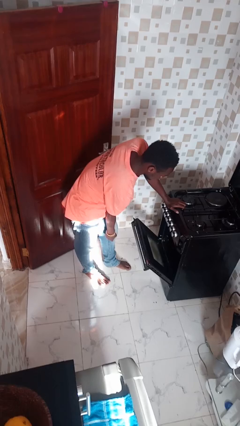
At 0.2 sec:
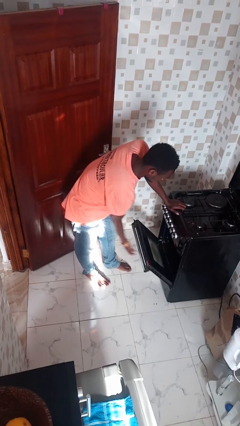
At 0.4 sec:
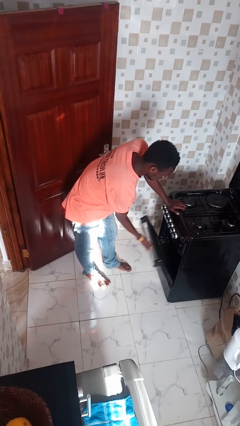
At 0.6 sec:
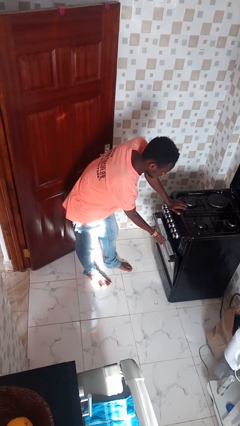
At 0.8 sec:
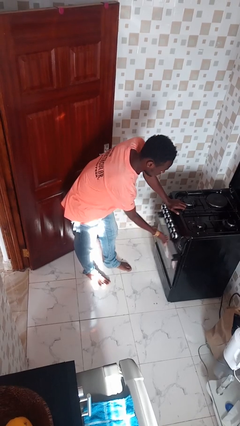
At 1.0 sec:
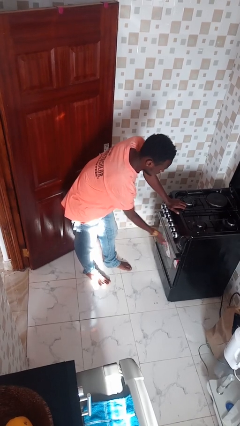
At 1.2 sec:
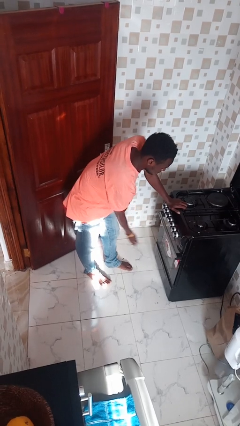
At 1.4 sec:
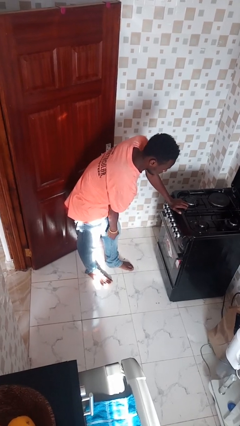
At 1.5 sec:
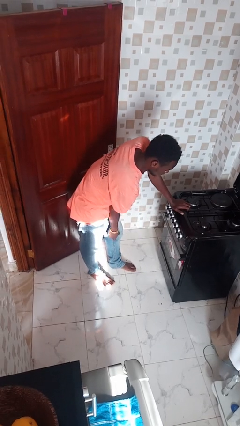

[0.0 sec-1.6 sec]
person closes oven door

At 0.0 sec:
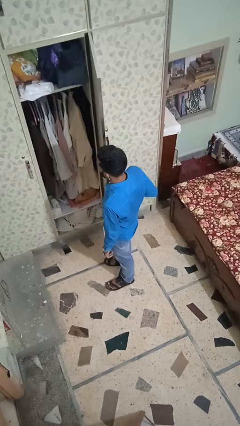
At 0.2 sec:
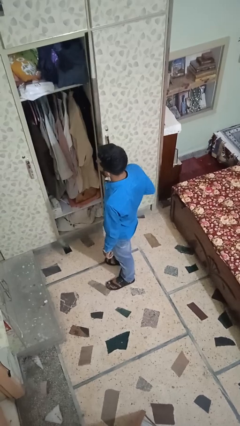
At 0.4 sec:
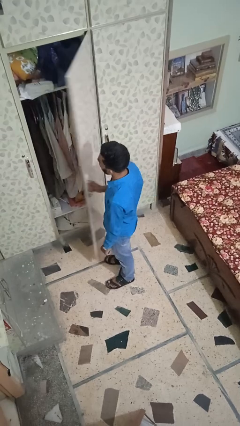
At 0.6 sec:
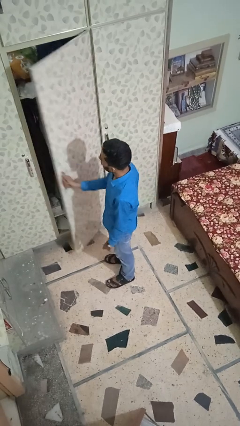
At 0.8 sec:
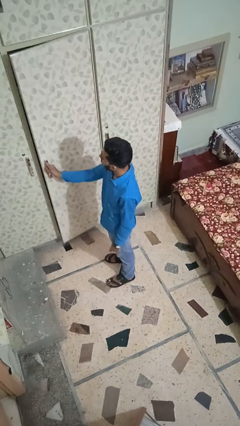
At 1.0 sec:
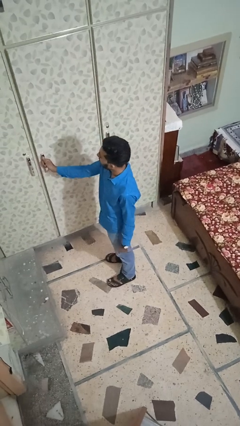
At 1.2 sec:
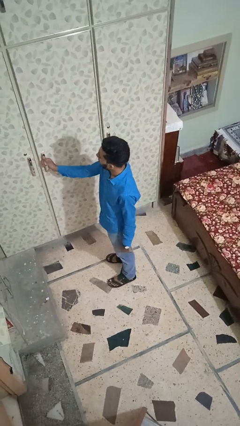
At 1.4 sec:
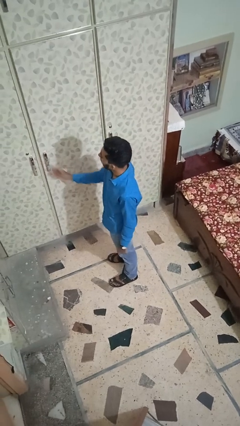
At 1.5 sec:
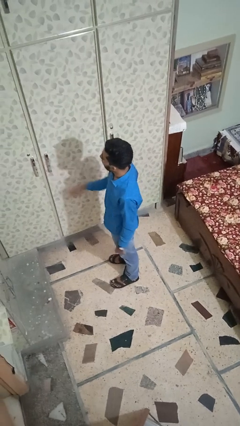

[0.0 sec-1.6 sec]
person closes closet door

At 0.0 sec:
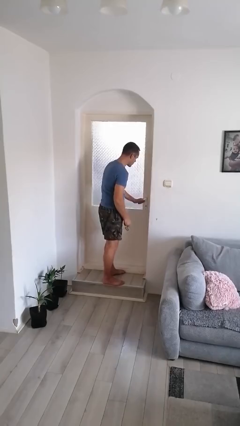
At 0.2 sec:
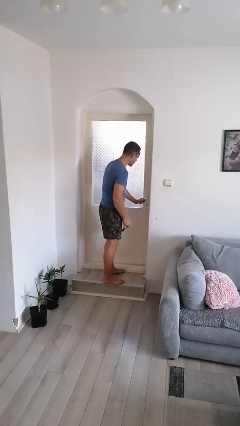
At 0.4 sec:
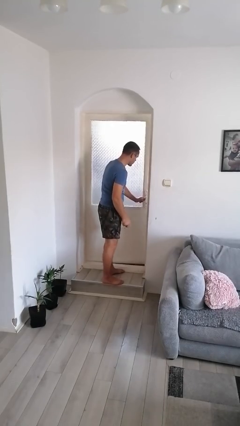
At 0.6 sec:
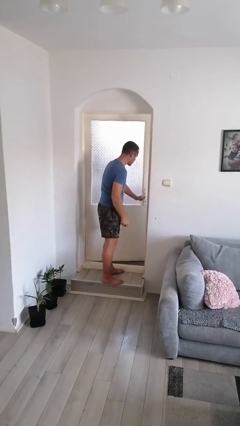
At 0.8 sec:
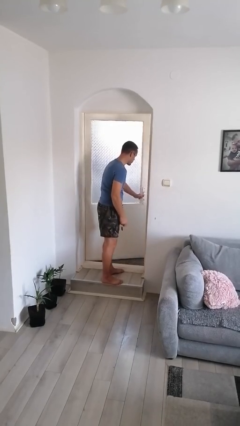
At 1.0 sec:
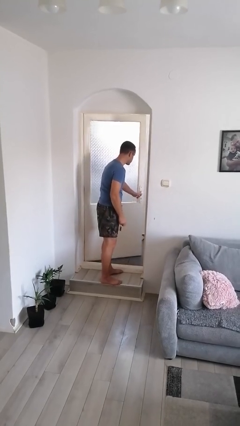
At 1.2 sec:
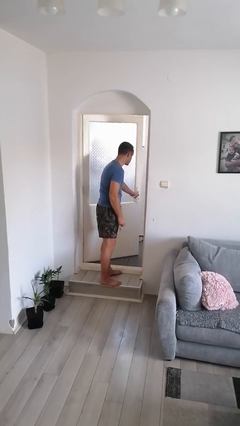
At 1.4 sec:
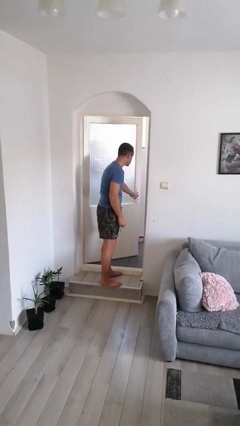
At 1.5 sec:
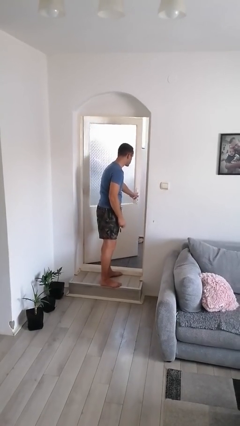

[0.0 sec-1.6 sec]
person opens facility door

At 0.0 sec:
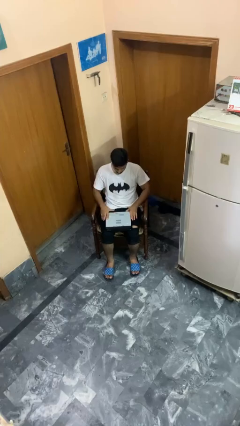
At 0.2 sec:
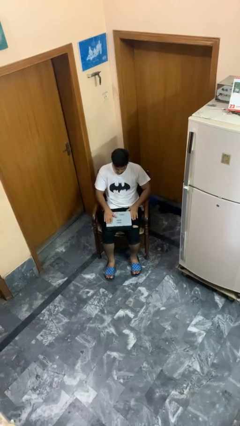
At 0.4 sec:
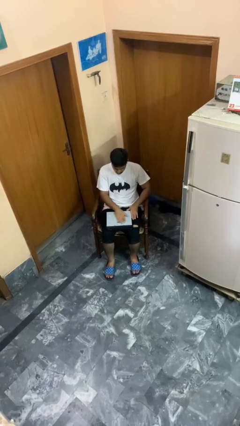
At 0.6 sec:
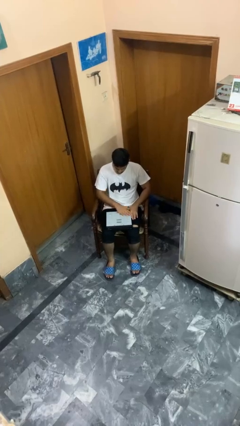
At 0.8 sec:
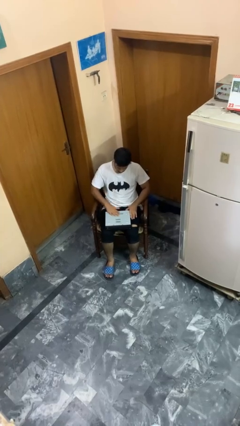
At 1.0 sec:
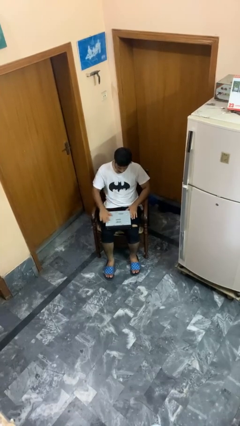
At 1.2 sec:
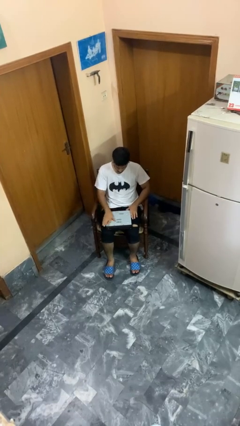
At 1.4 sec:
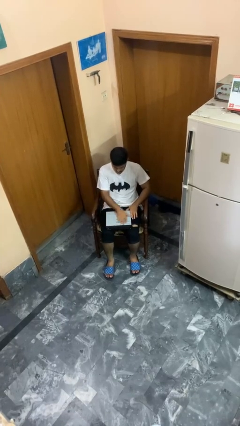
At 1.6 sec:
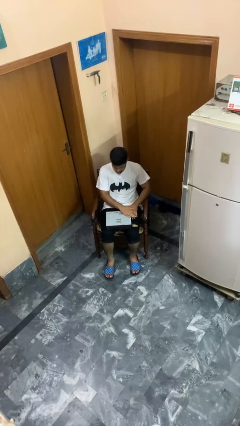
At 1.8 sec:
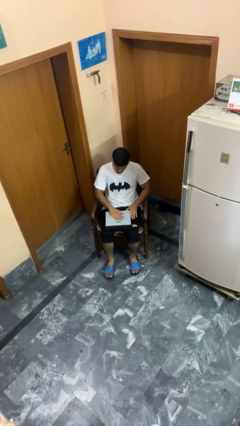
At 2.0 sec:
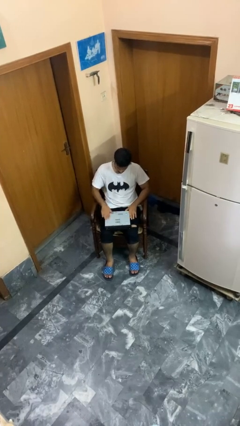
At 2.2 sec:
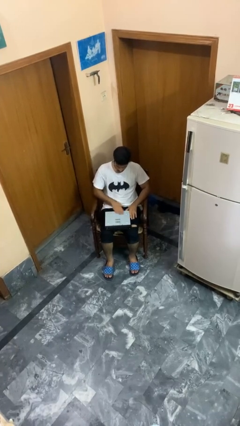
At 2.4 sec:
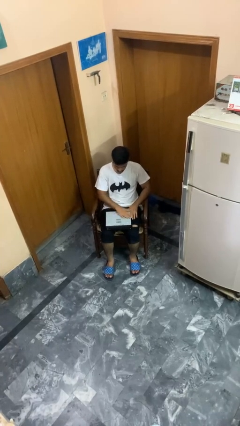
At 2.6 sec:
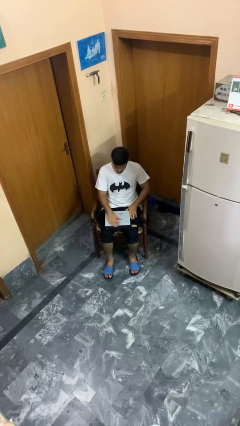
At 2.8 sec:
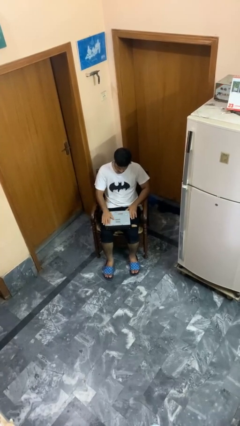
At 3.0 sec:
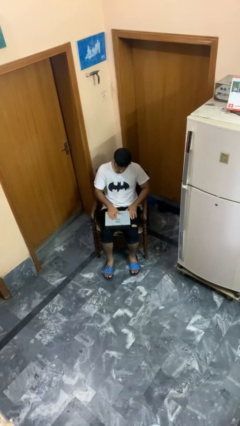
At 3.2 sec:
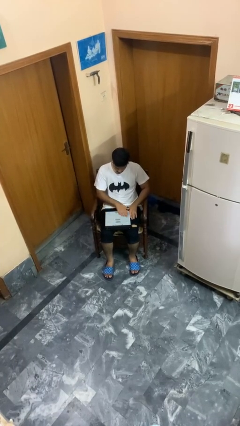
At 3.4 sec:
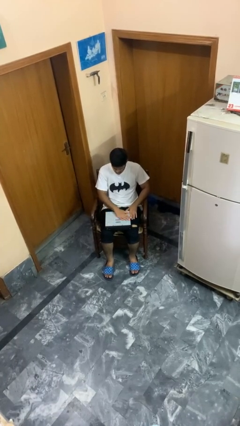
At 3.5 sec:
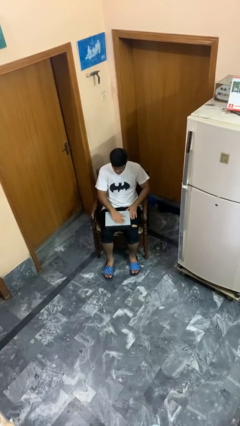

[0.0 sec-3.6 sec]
person waves hand over object

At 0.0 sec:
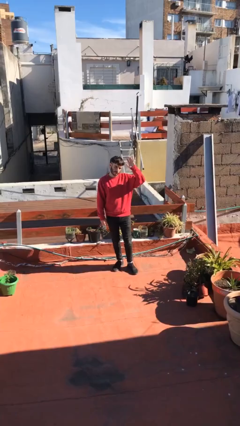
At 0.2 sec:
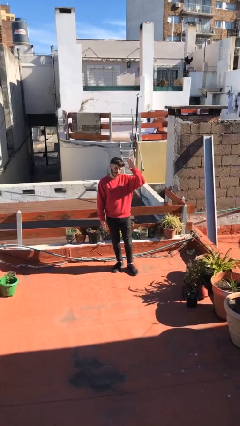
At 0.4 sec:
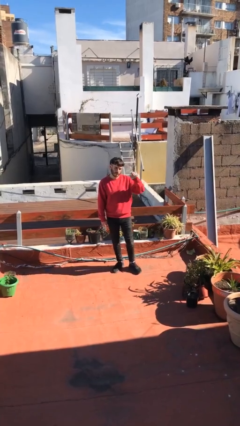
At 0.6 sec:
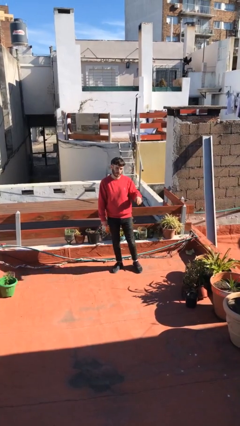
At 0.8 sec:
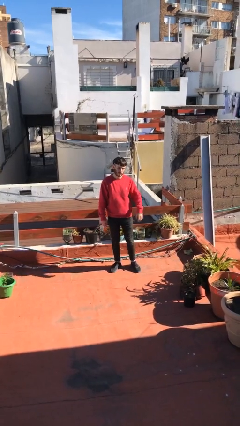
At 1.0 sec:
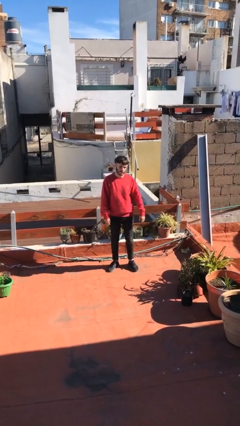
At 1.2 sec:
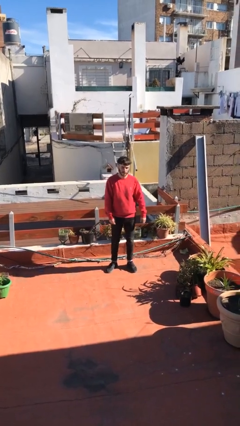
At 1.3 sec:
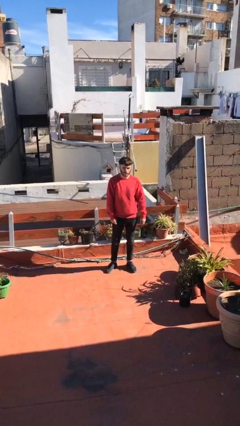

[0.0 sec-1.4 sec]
person gestures lower hand

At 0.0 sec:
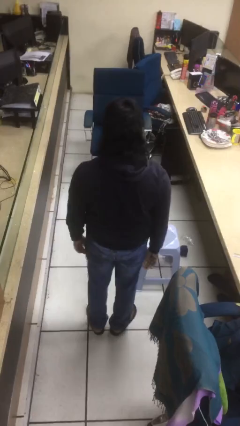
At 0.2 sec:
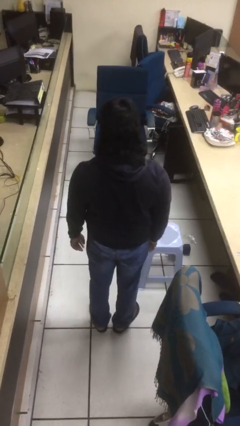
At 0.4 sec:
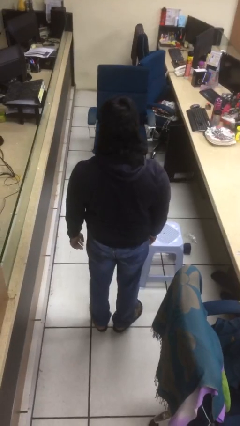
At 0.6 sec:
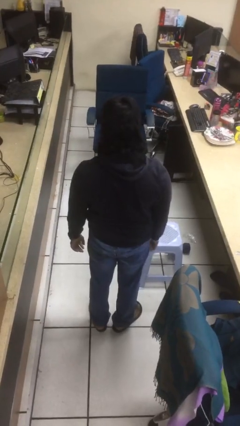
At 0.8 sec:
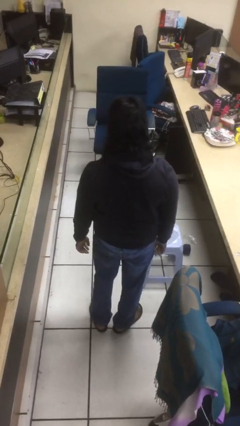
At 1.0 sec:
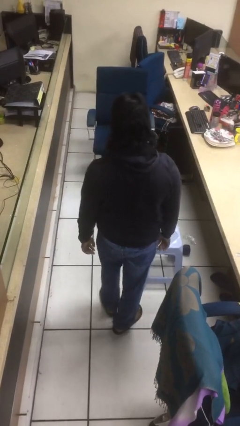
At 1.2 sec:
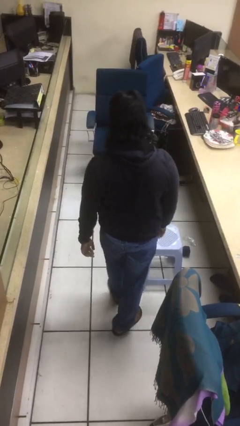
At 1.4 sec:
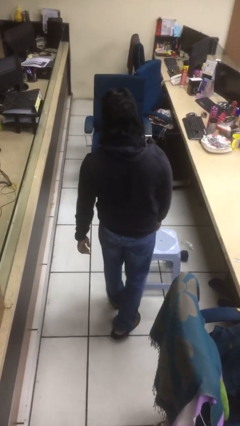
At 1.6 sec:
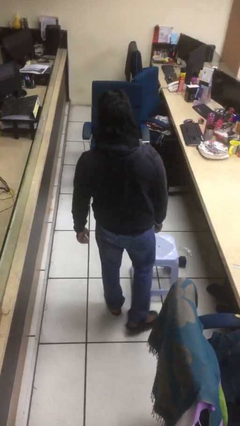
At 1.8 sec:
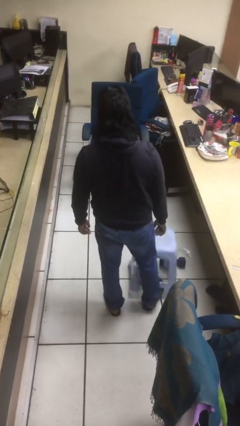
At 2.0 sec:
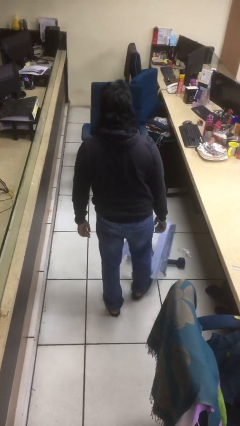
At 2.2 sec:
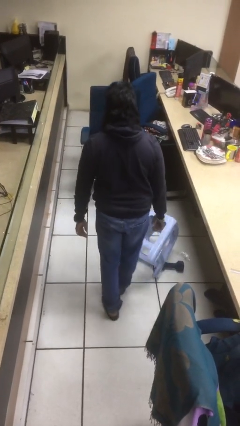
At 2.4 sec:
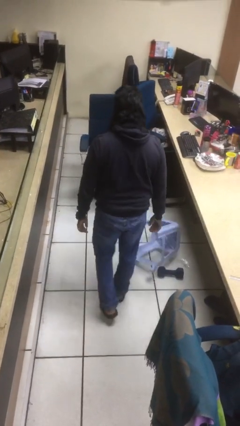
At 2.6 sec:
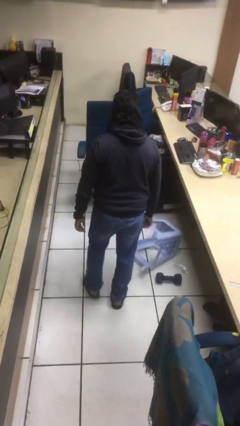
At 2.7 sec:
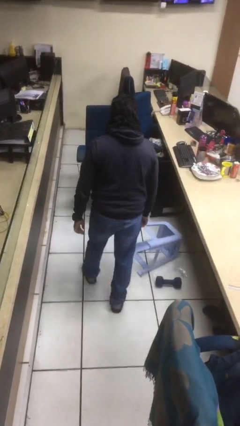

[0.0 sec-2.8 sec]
person knocks over furniture

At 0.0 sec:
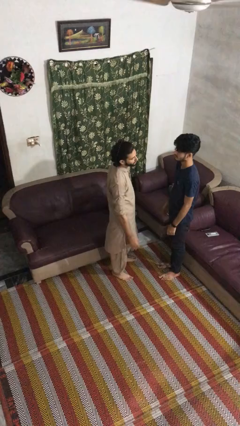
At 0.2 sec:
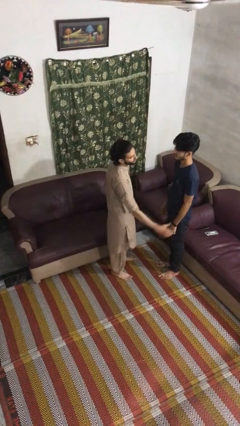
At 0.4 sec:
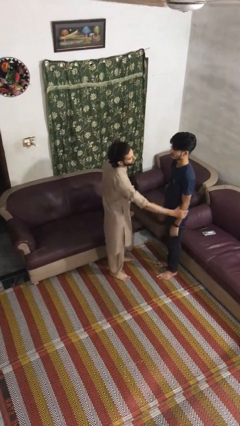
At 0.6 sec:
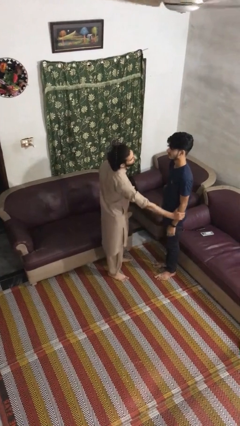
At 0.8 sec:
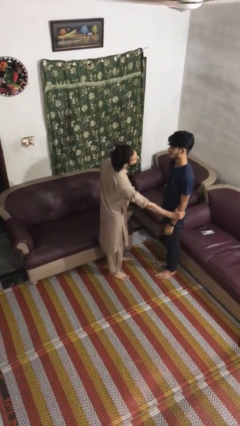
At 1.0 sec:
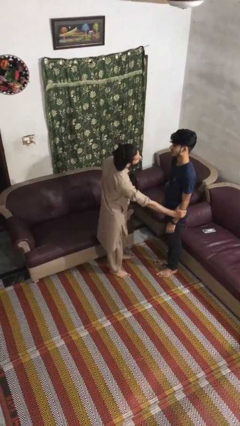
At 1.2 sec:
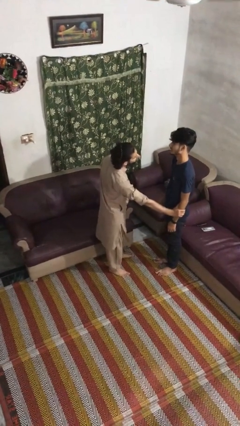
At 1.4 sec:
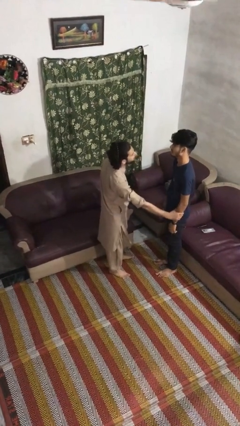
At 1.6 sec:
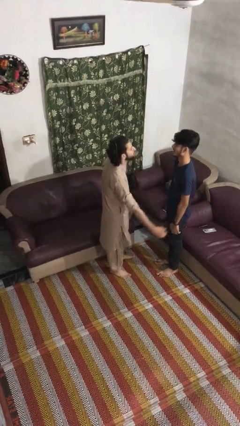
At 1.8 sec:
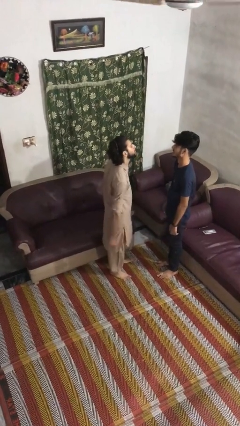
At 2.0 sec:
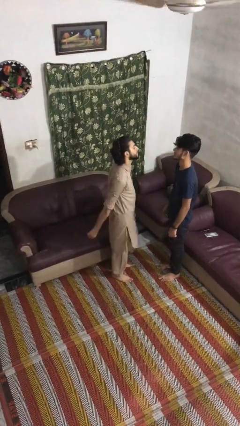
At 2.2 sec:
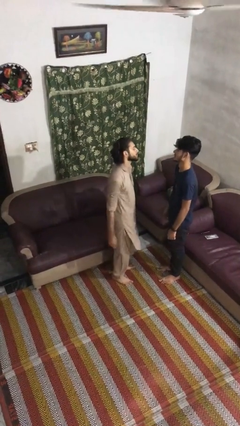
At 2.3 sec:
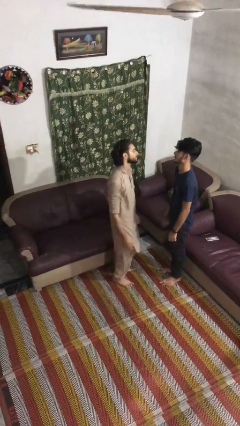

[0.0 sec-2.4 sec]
person grabs person by forearm

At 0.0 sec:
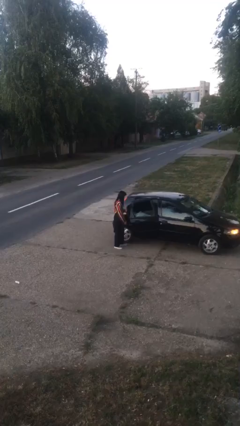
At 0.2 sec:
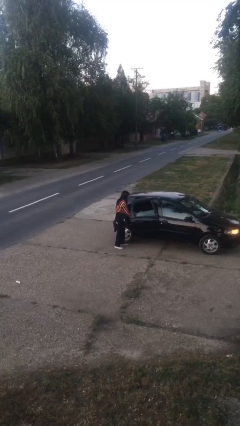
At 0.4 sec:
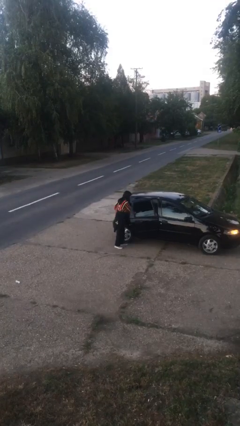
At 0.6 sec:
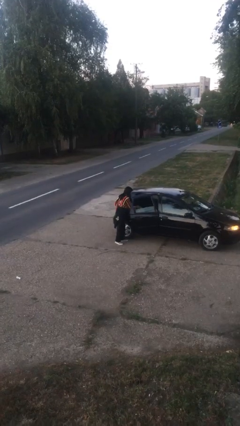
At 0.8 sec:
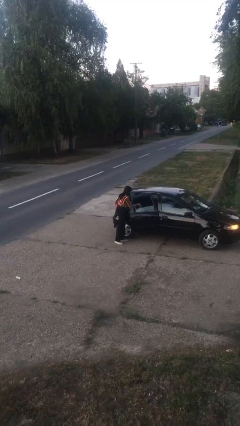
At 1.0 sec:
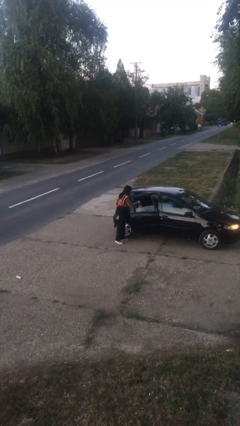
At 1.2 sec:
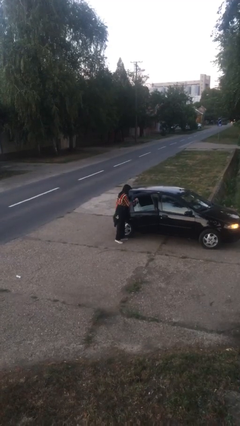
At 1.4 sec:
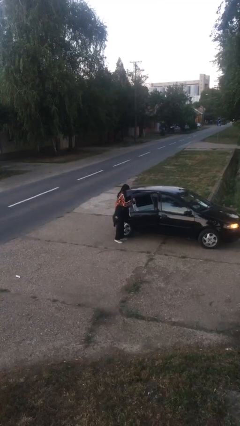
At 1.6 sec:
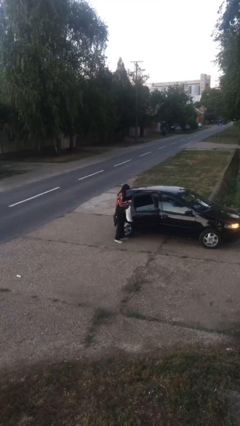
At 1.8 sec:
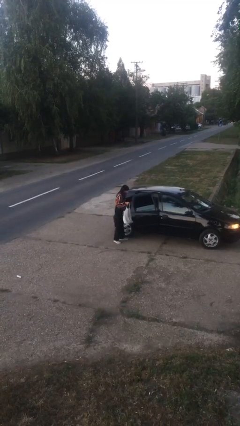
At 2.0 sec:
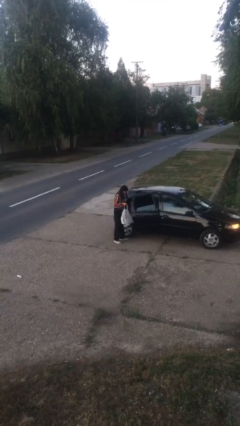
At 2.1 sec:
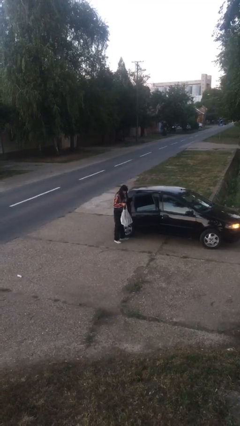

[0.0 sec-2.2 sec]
person unloads car
